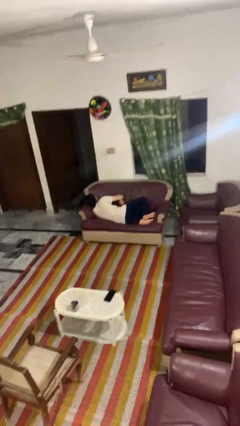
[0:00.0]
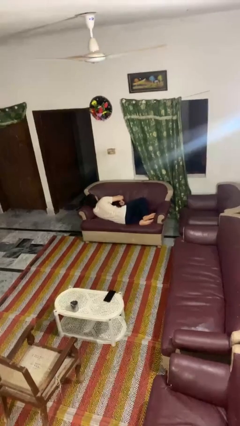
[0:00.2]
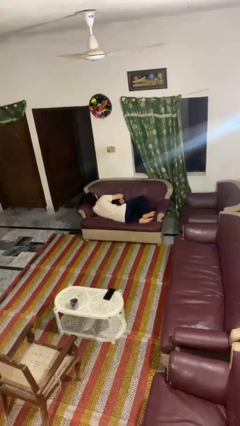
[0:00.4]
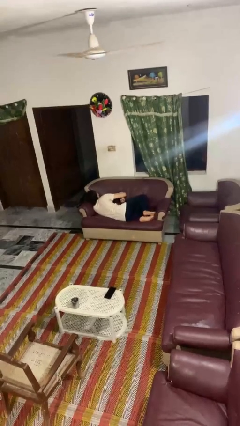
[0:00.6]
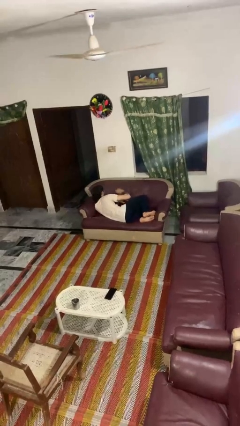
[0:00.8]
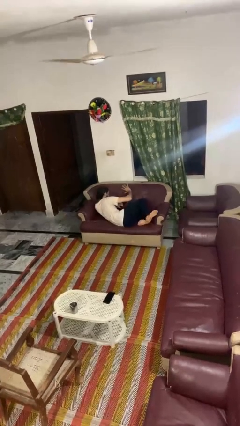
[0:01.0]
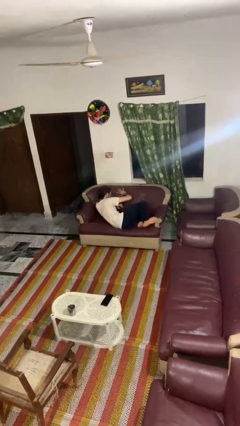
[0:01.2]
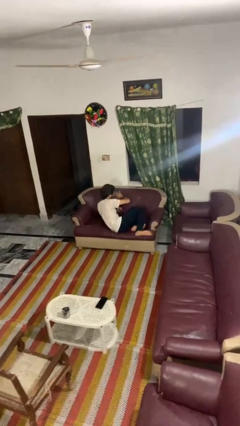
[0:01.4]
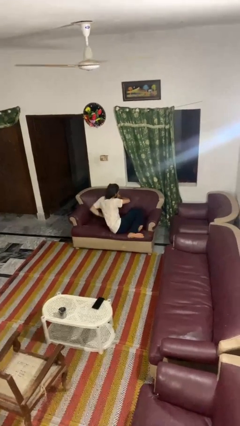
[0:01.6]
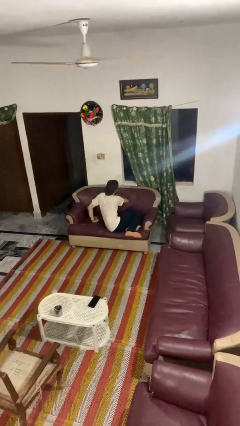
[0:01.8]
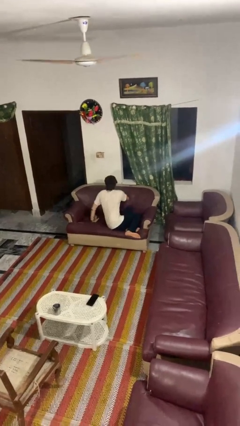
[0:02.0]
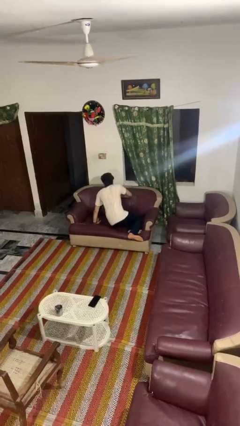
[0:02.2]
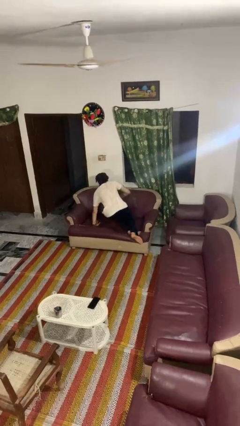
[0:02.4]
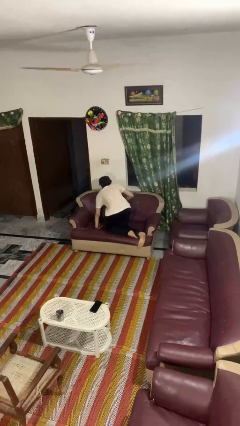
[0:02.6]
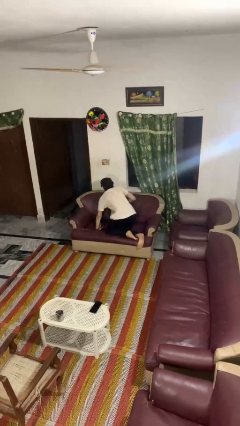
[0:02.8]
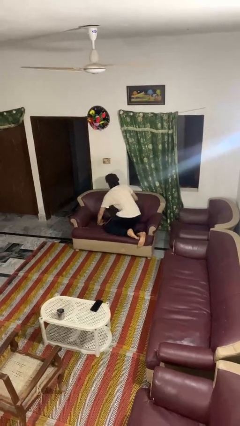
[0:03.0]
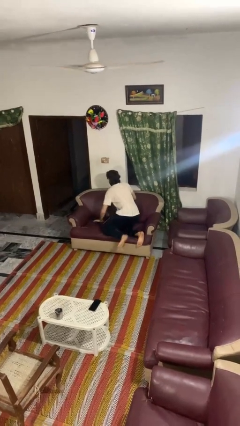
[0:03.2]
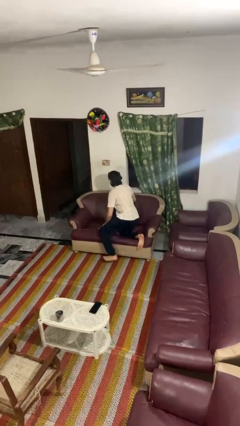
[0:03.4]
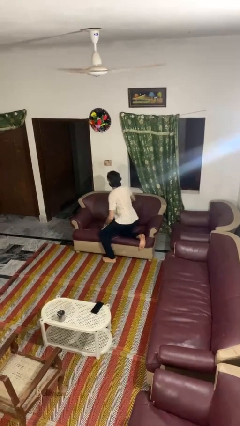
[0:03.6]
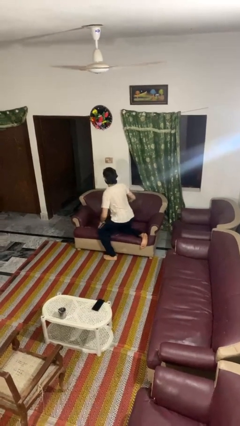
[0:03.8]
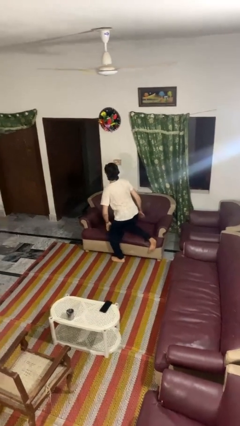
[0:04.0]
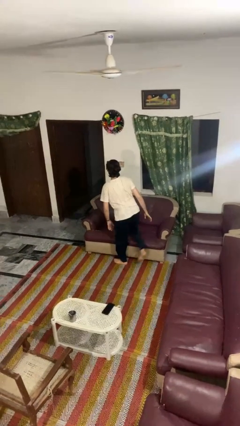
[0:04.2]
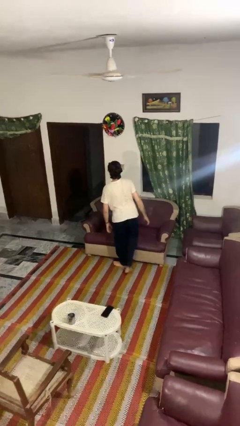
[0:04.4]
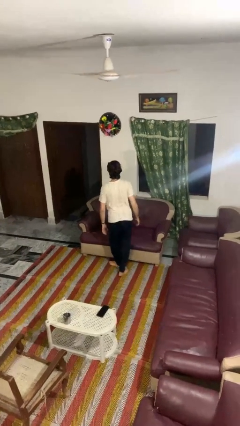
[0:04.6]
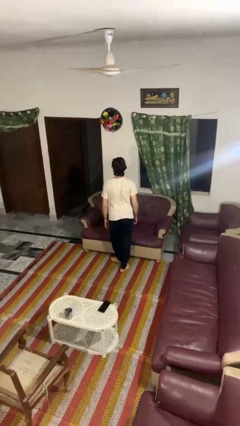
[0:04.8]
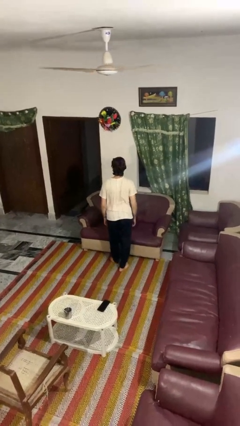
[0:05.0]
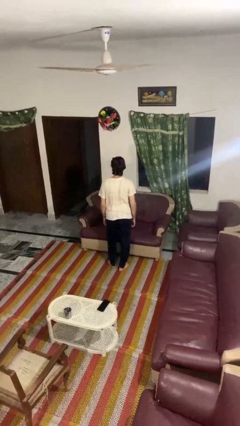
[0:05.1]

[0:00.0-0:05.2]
person stands up

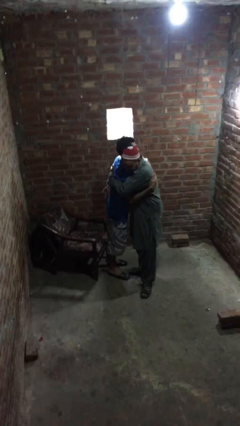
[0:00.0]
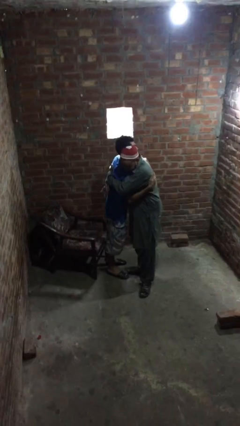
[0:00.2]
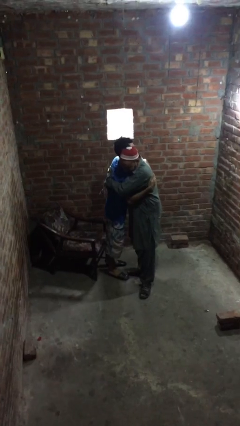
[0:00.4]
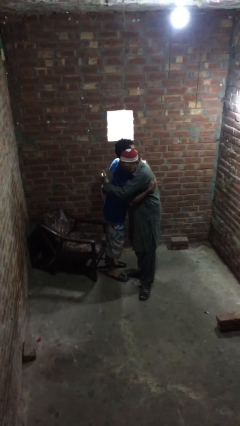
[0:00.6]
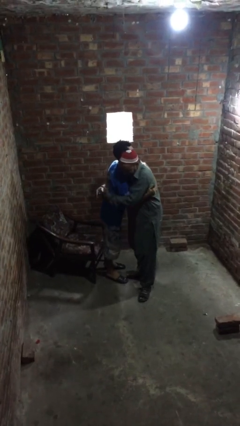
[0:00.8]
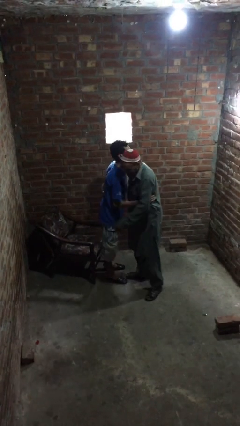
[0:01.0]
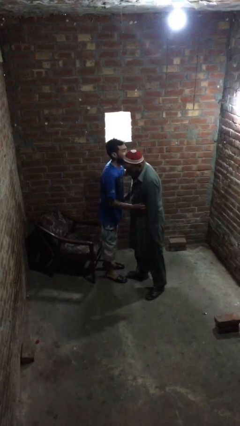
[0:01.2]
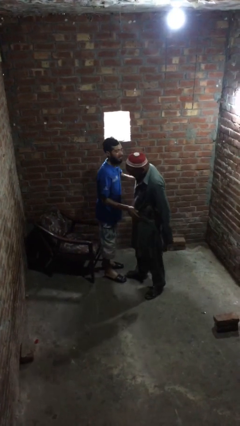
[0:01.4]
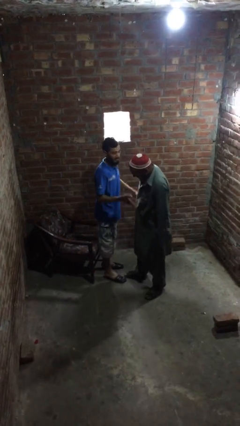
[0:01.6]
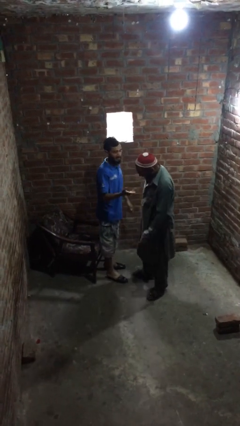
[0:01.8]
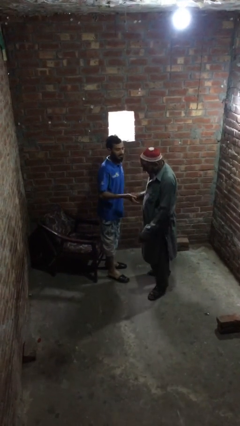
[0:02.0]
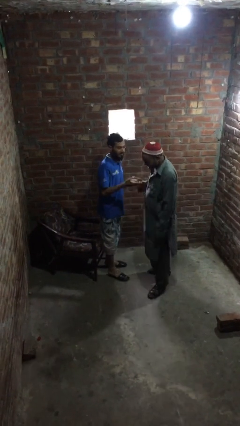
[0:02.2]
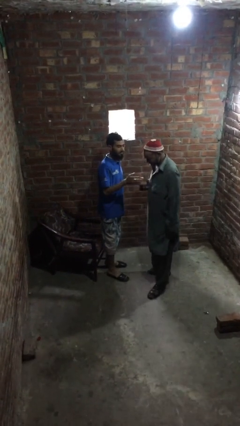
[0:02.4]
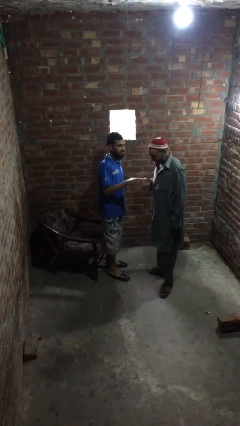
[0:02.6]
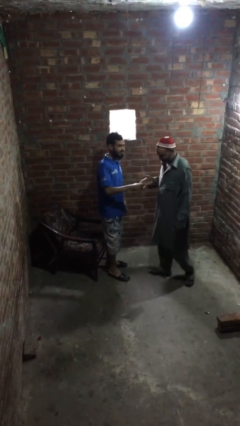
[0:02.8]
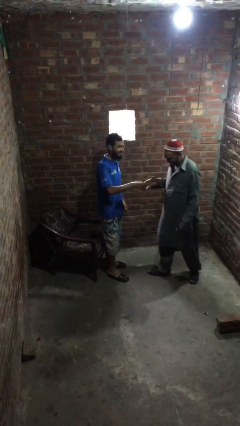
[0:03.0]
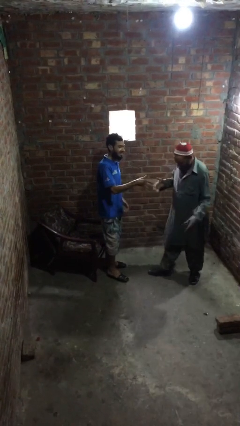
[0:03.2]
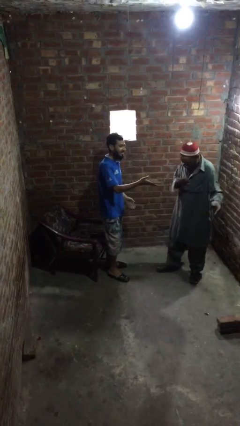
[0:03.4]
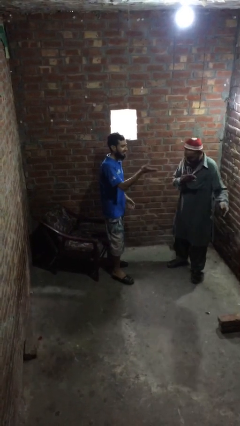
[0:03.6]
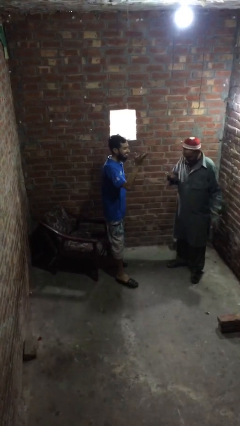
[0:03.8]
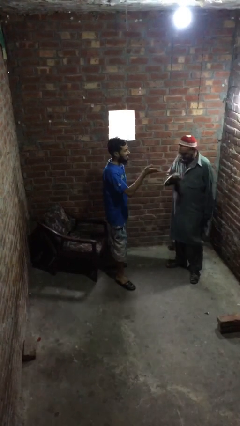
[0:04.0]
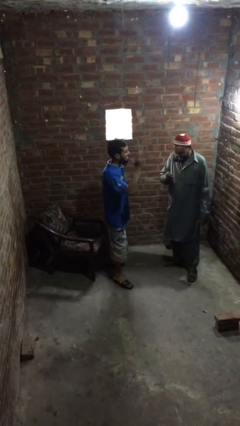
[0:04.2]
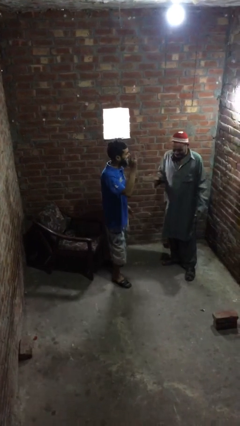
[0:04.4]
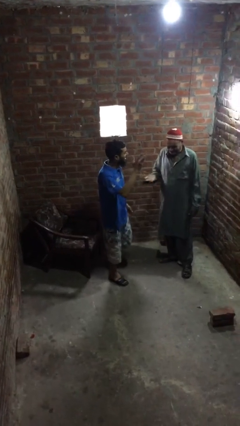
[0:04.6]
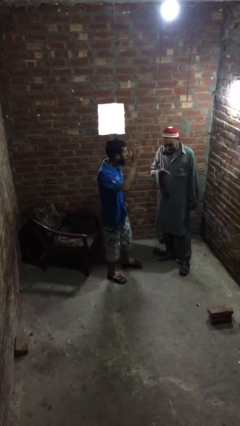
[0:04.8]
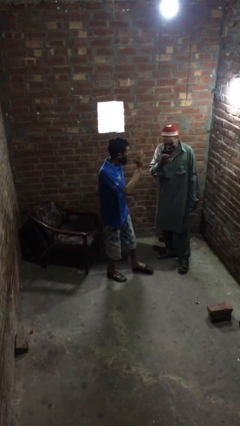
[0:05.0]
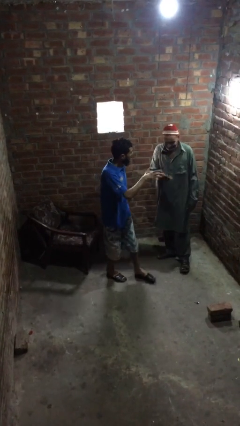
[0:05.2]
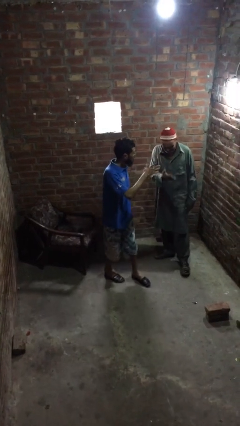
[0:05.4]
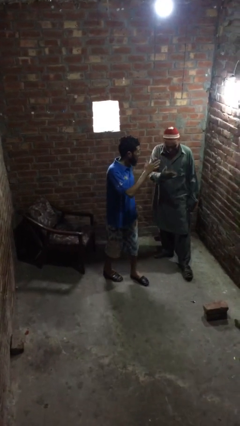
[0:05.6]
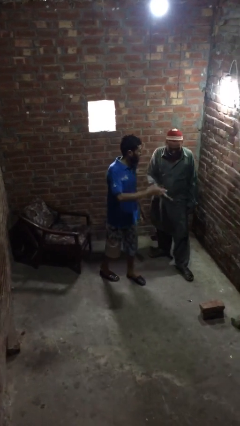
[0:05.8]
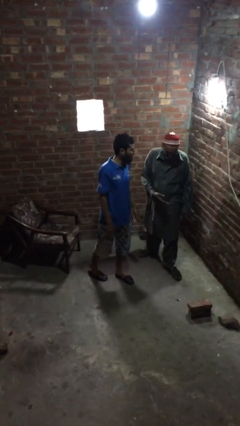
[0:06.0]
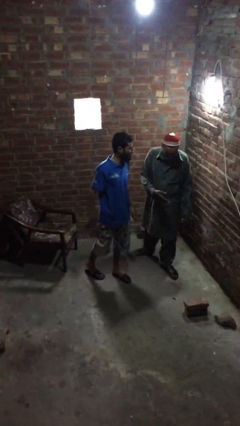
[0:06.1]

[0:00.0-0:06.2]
person talks to person

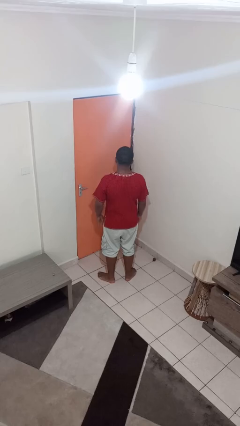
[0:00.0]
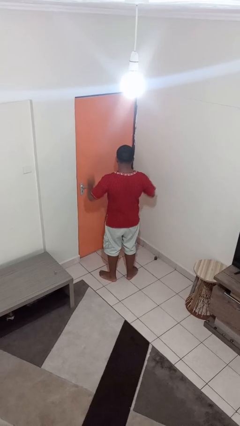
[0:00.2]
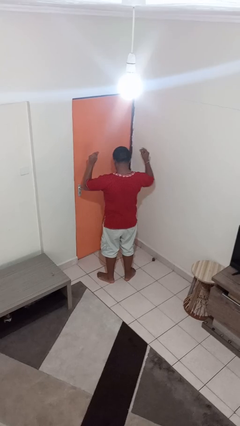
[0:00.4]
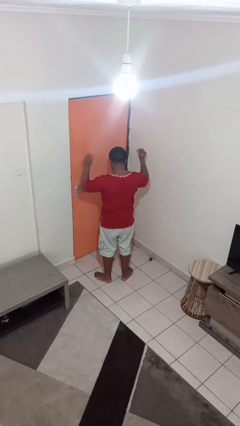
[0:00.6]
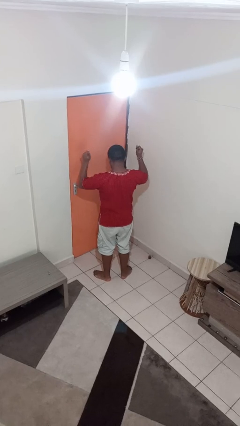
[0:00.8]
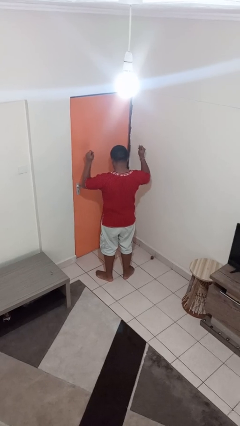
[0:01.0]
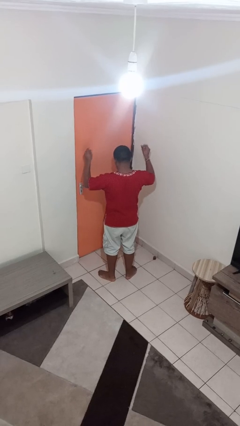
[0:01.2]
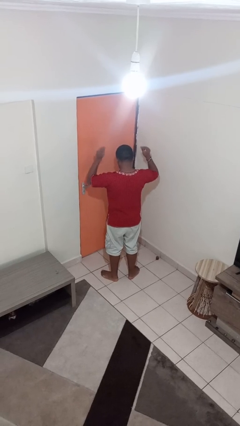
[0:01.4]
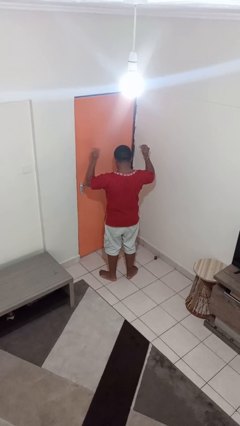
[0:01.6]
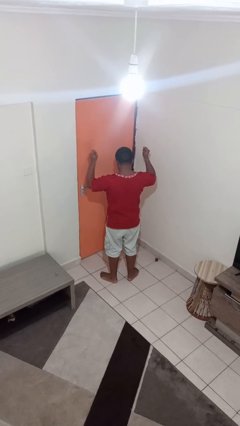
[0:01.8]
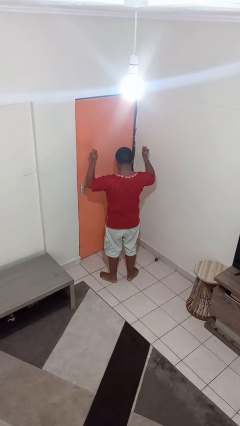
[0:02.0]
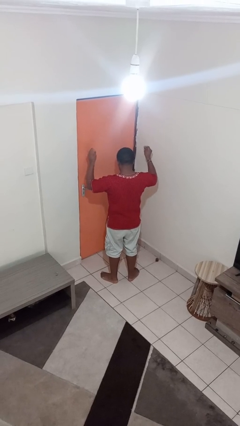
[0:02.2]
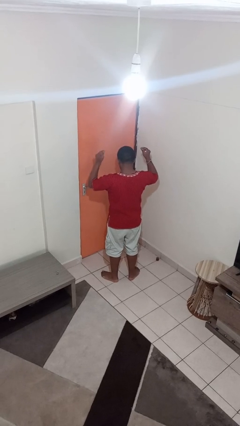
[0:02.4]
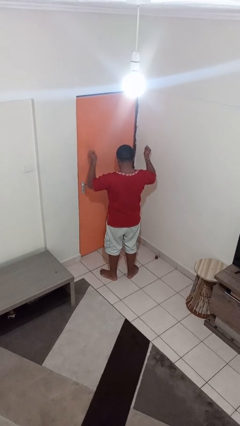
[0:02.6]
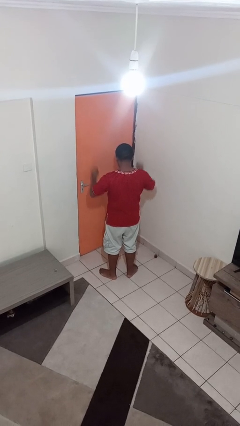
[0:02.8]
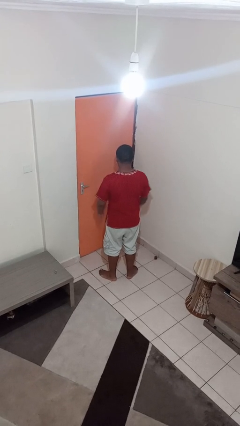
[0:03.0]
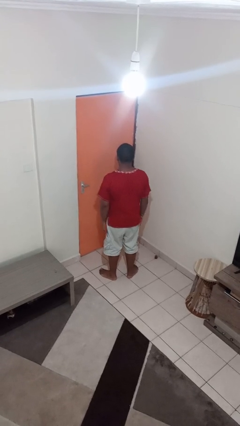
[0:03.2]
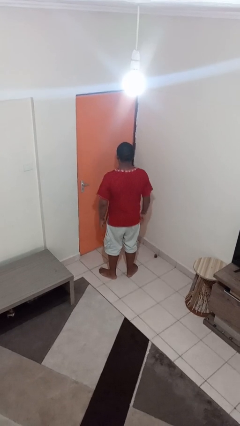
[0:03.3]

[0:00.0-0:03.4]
person snaps fingers

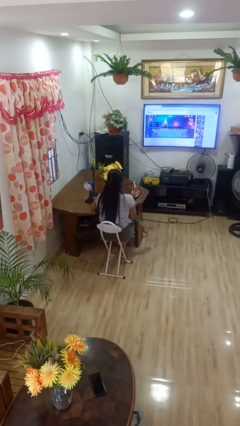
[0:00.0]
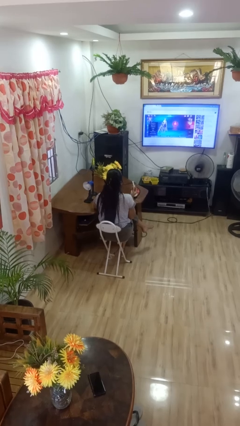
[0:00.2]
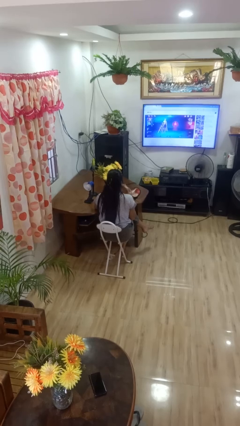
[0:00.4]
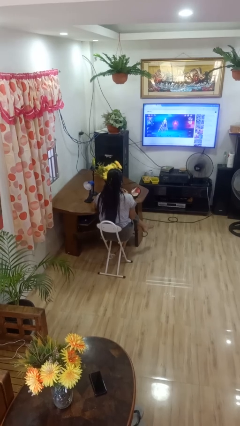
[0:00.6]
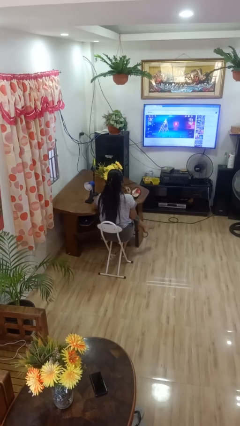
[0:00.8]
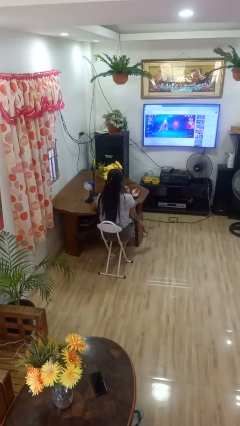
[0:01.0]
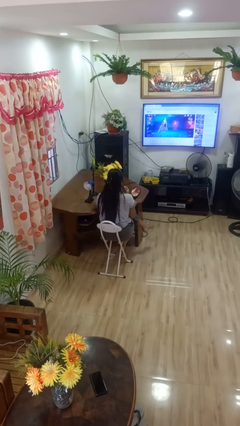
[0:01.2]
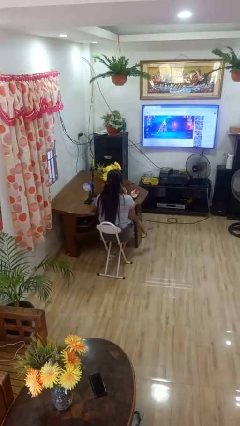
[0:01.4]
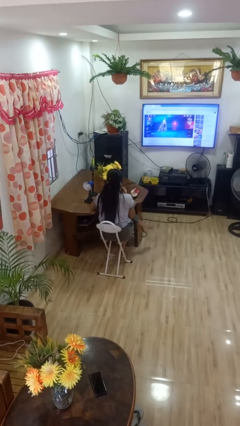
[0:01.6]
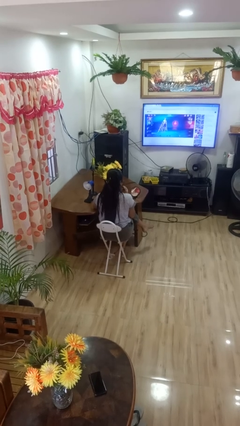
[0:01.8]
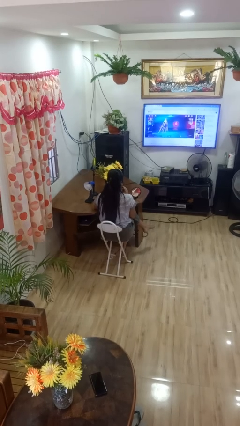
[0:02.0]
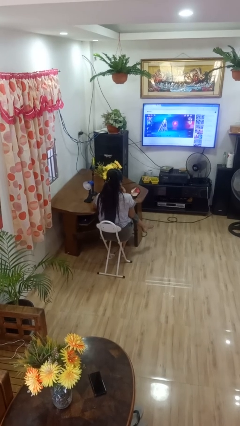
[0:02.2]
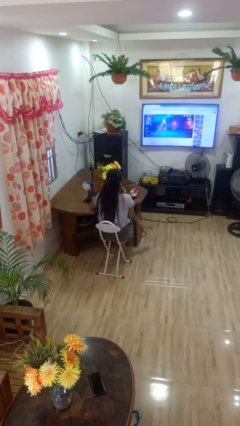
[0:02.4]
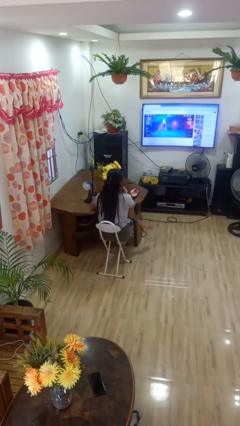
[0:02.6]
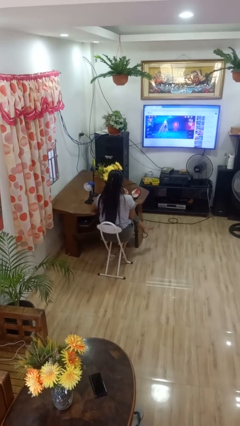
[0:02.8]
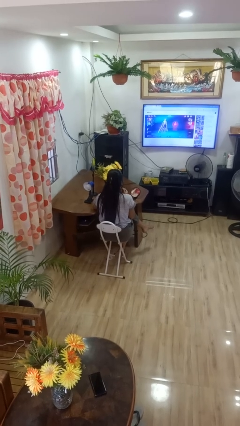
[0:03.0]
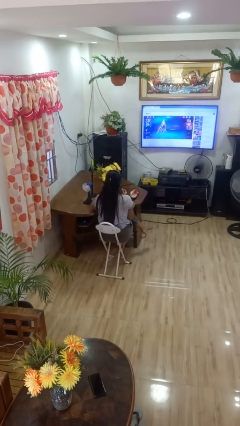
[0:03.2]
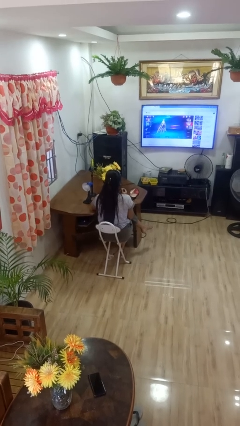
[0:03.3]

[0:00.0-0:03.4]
person applies lip makeup
